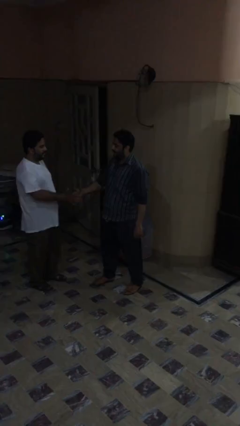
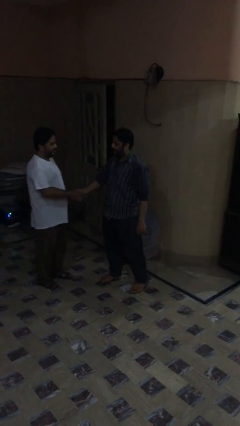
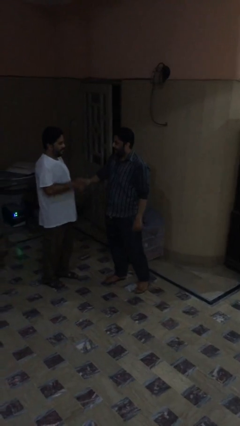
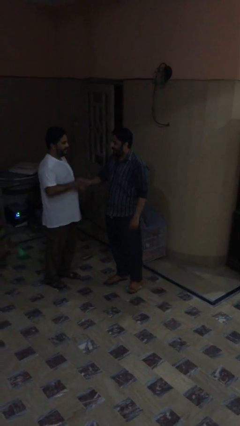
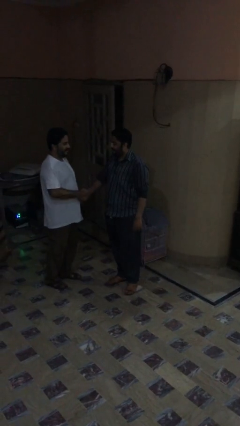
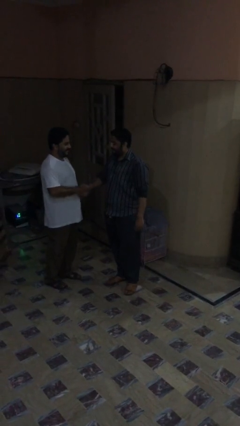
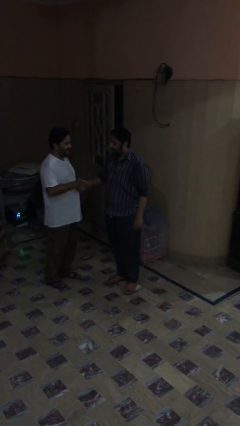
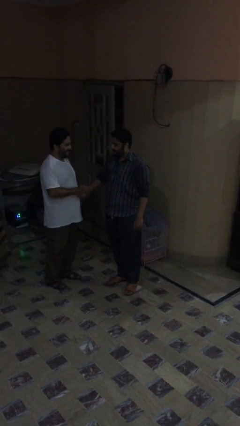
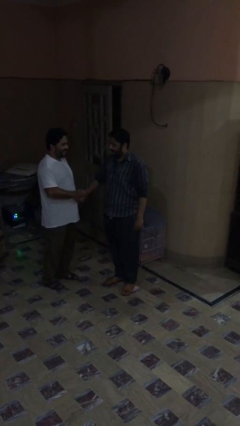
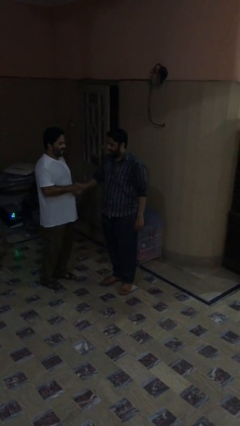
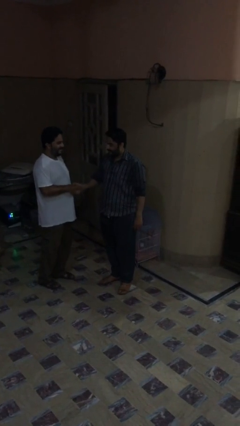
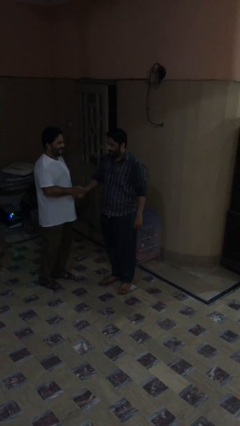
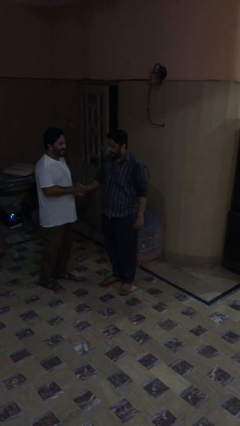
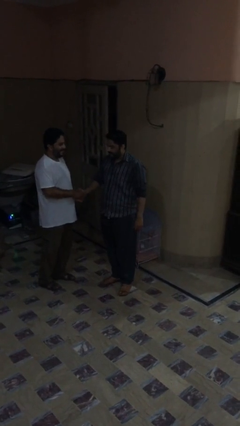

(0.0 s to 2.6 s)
person shakes hand

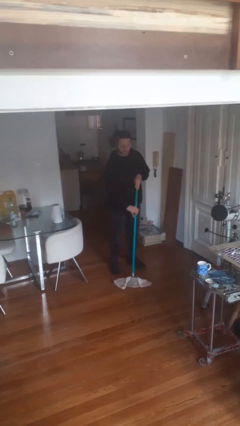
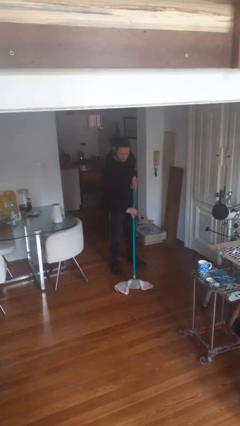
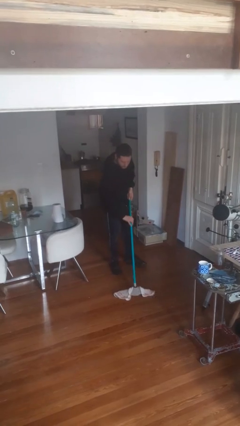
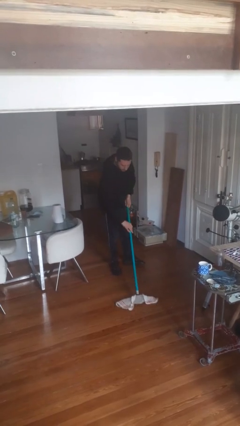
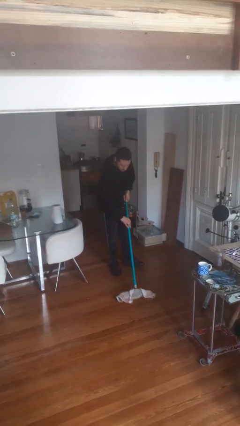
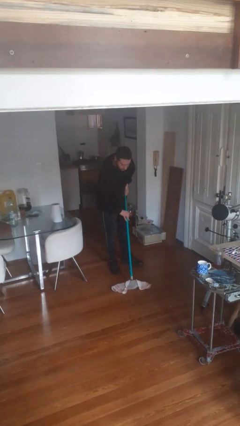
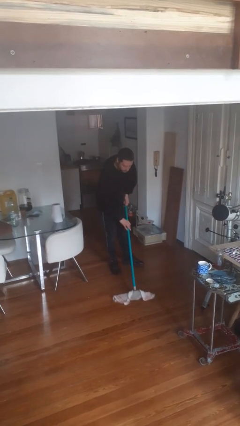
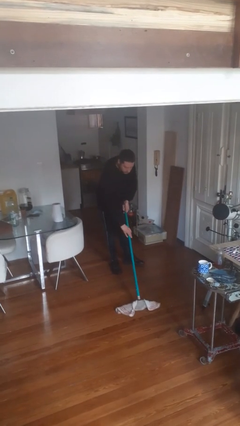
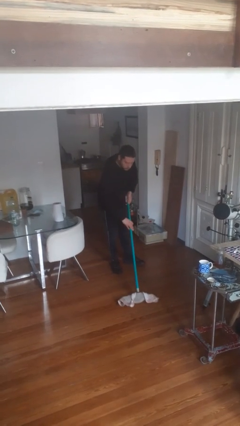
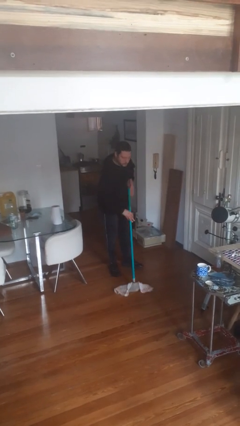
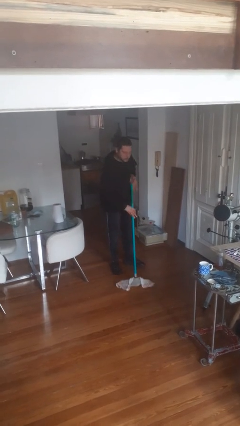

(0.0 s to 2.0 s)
person mops

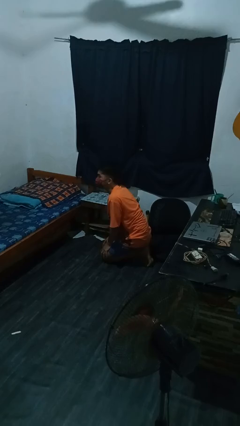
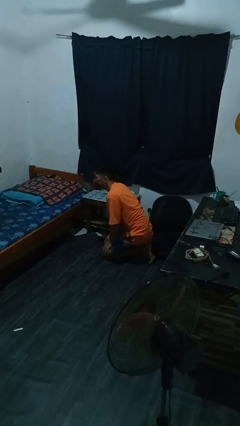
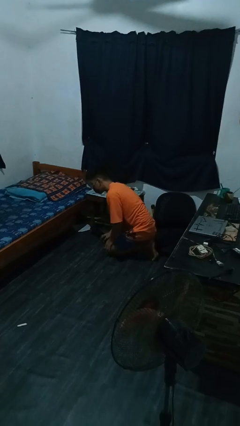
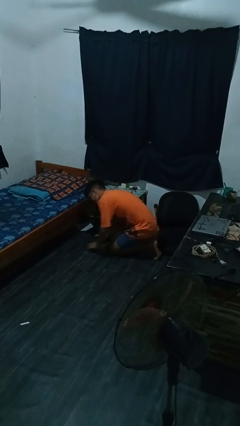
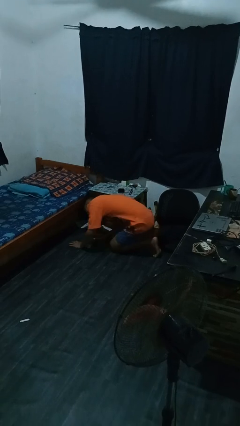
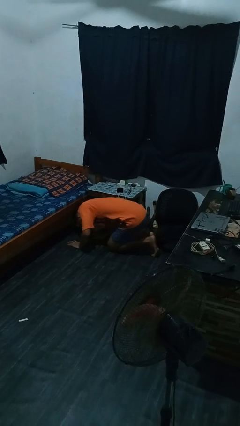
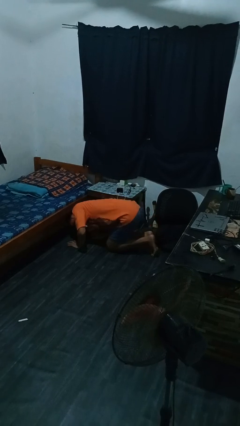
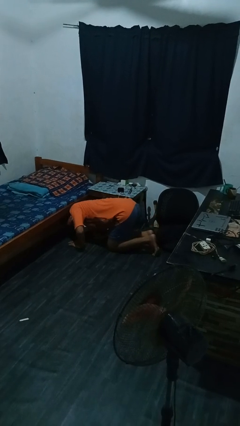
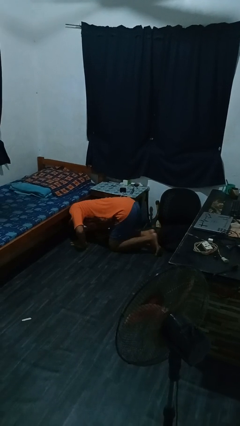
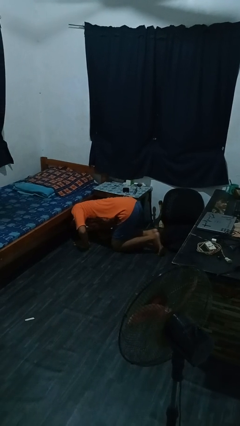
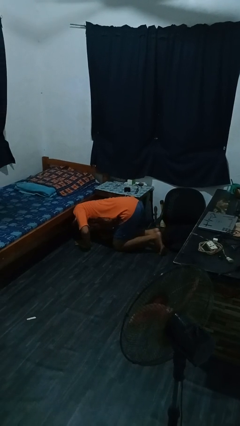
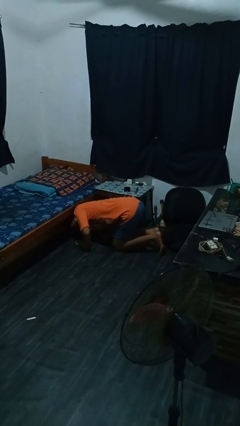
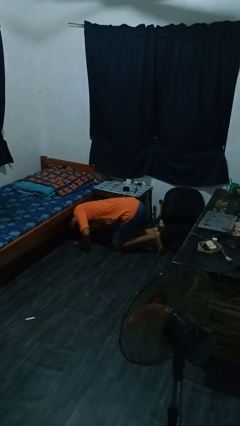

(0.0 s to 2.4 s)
person searches under bed

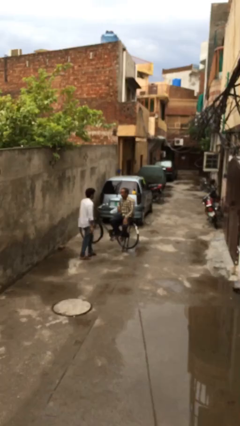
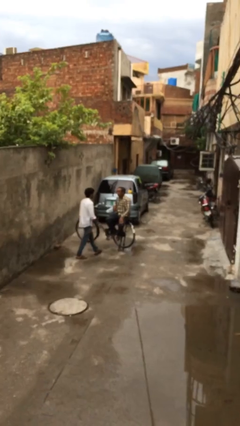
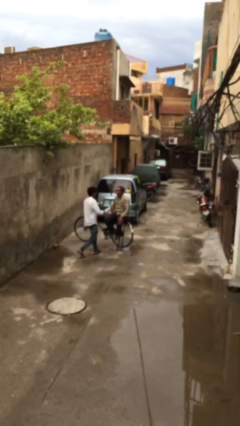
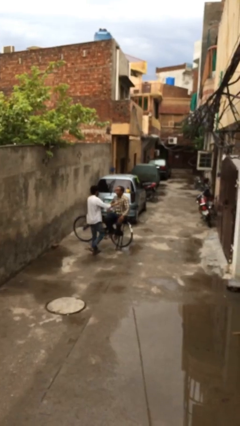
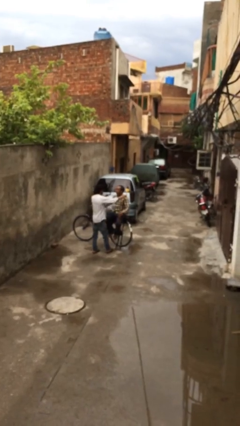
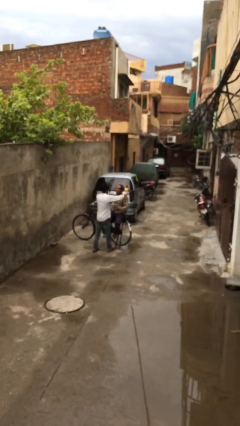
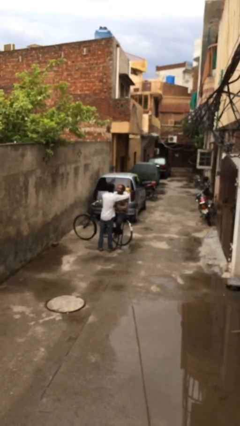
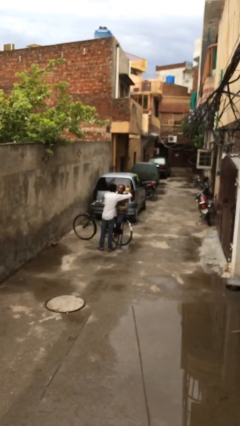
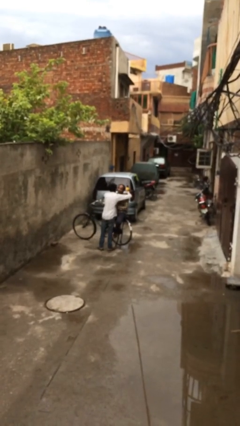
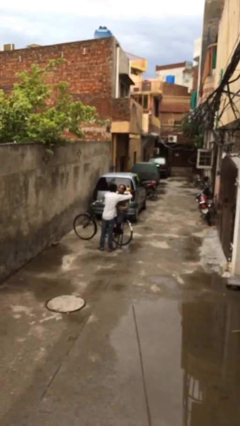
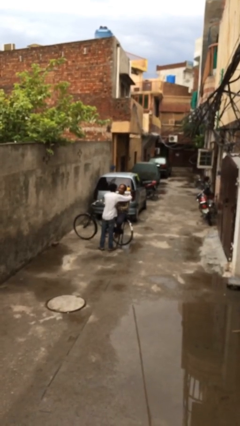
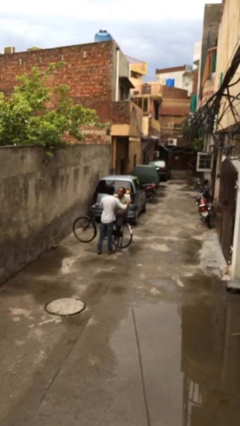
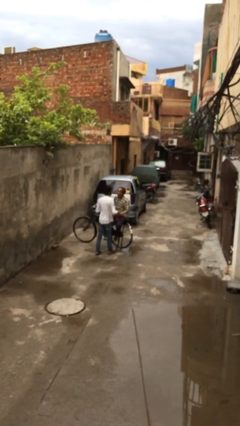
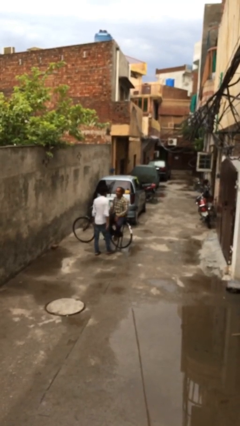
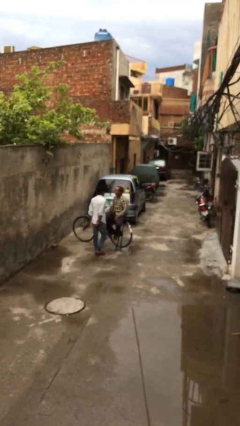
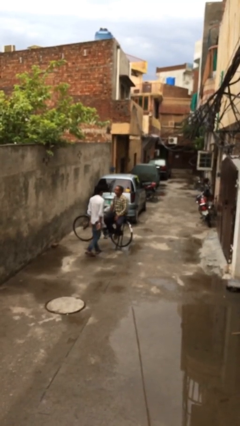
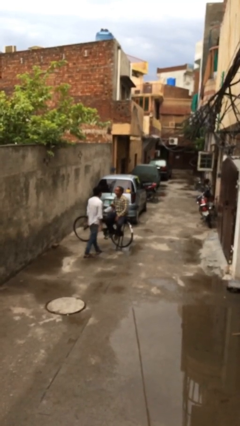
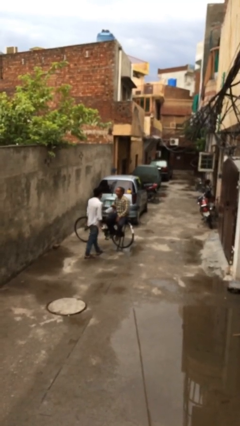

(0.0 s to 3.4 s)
person embraces person

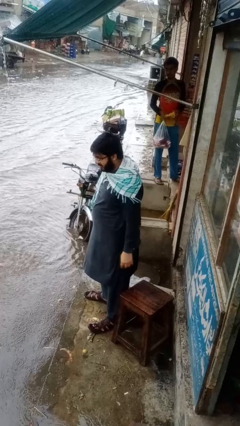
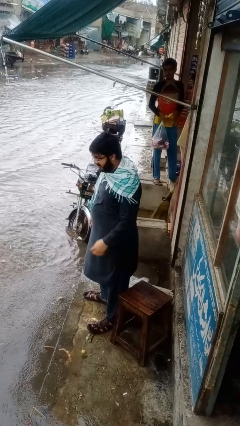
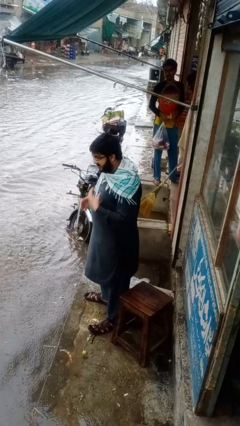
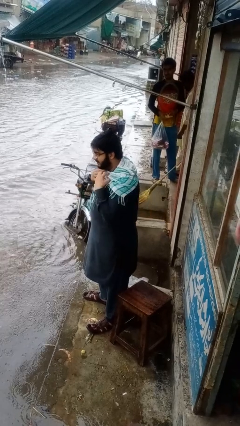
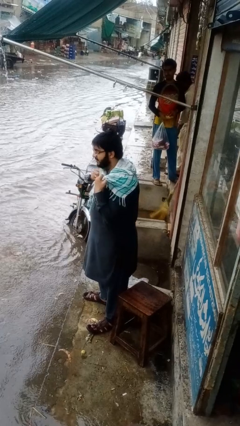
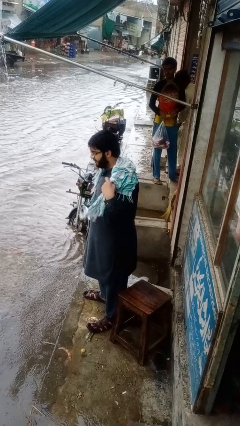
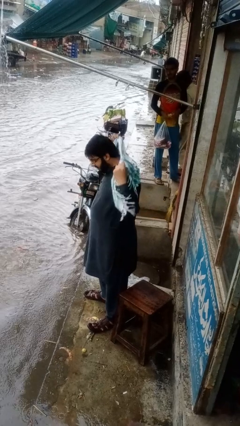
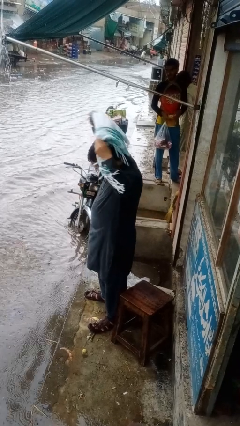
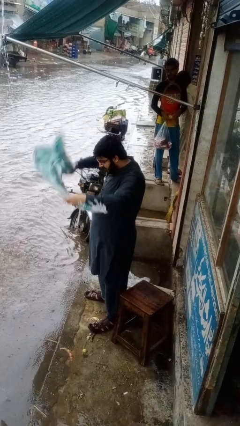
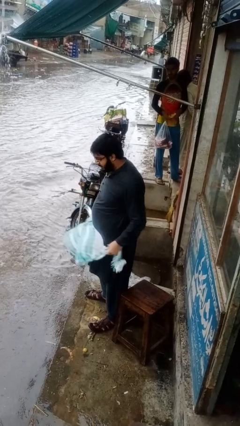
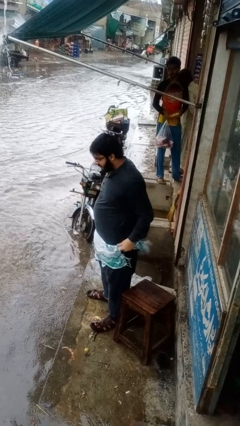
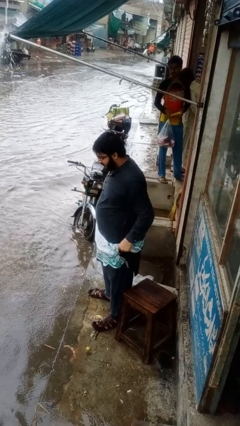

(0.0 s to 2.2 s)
person takes off scarf

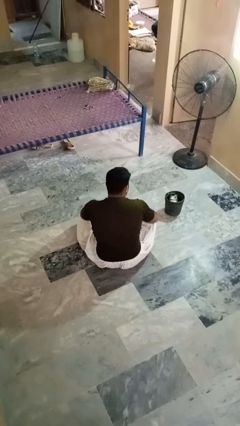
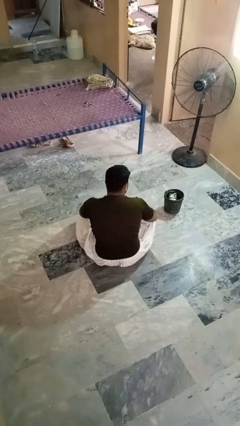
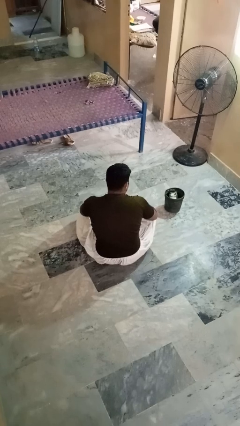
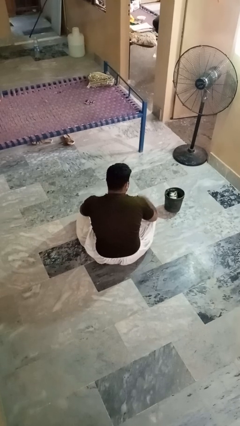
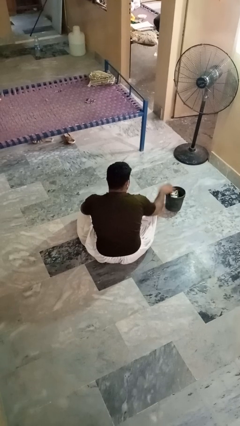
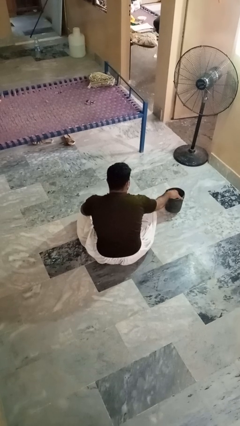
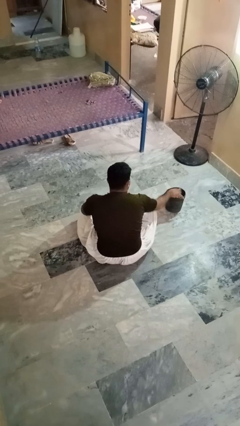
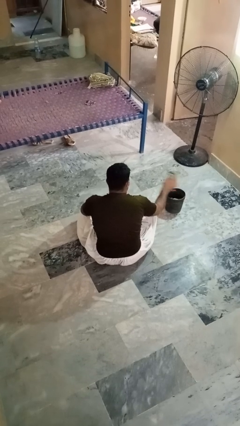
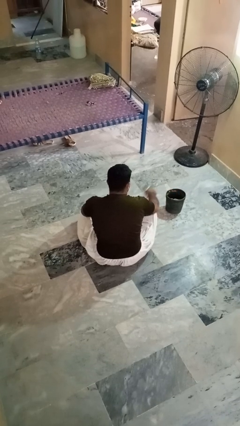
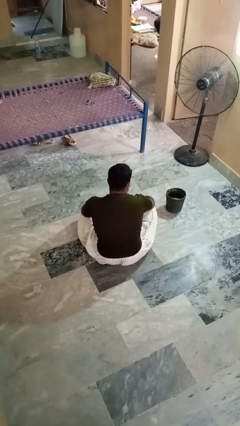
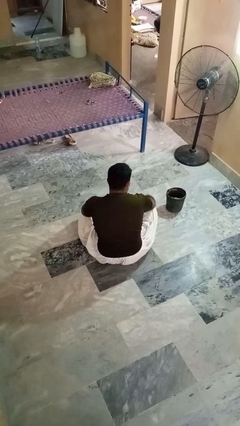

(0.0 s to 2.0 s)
person takes object from basket

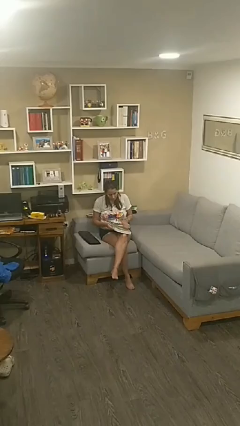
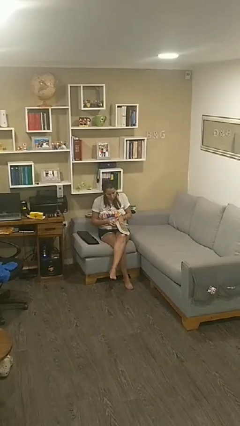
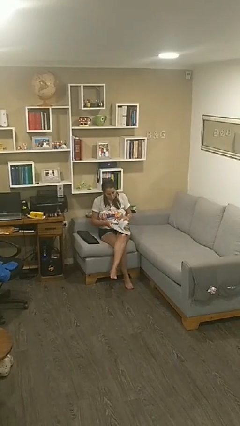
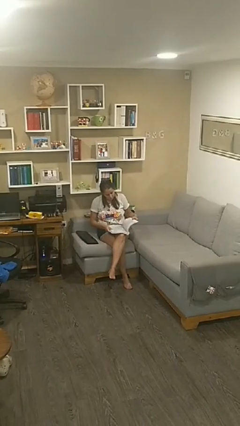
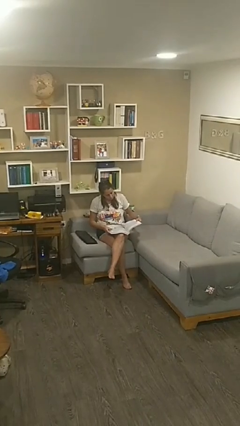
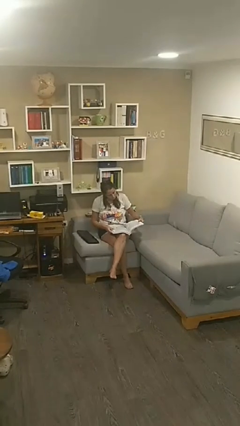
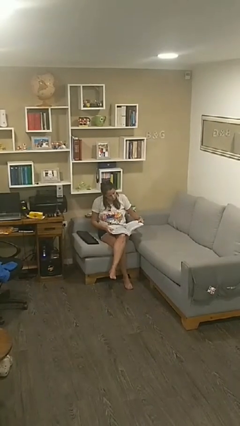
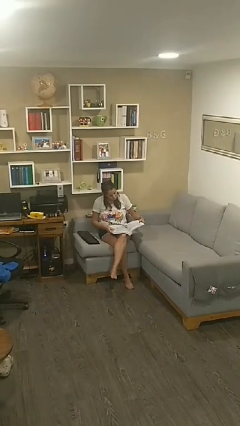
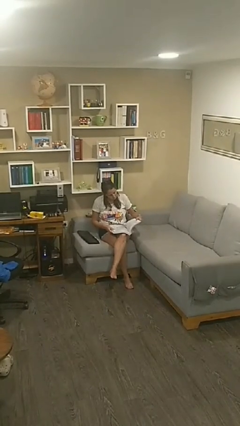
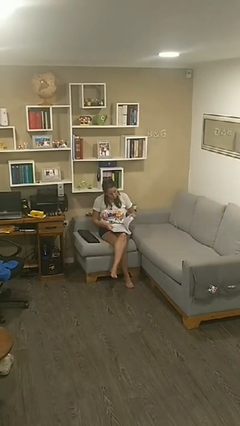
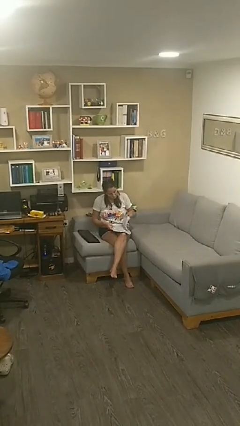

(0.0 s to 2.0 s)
person reads document

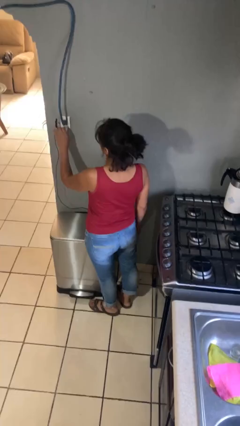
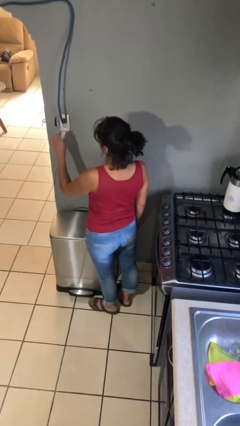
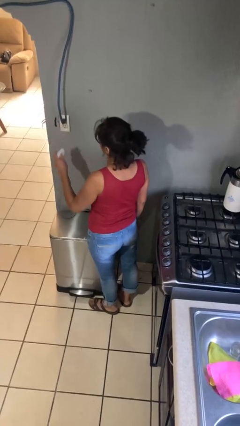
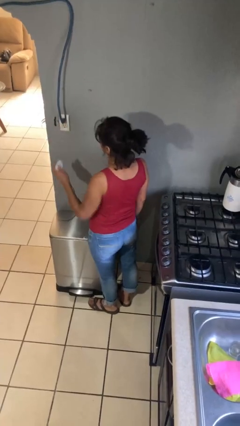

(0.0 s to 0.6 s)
person unplugs from electrical socket
